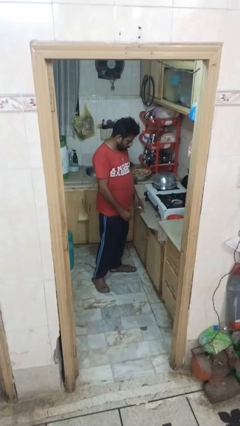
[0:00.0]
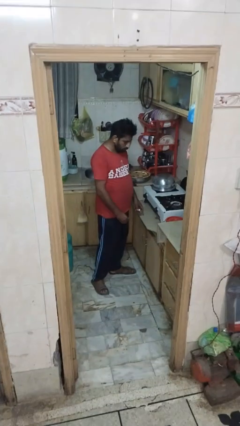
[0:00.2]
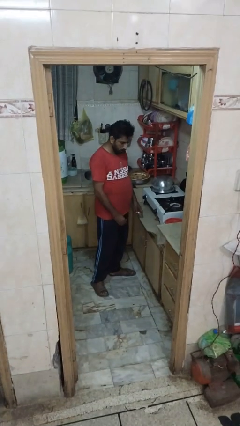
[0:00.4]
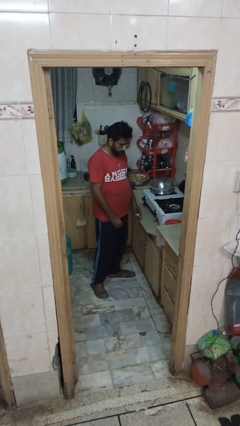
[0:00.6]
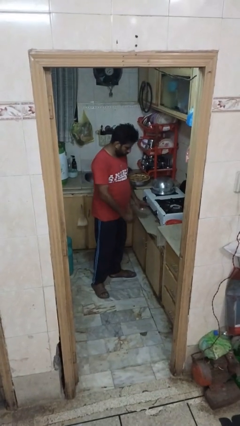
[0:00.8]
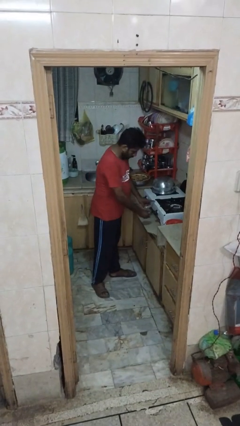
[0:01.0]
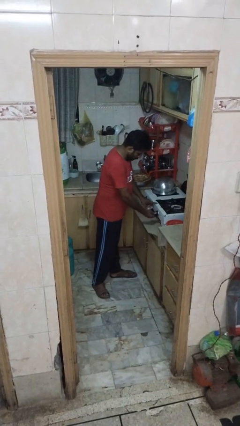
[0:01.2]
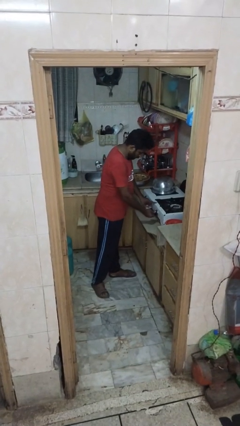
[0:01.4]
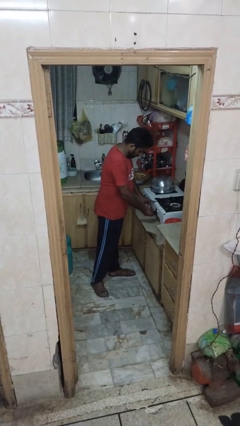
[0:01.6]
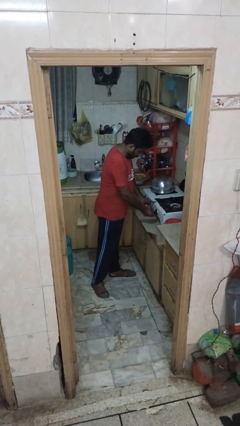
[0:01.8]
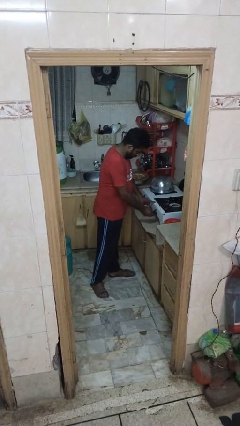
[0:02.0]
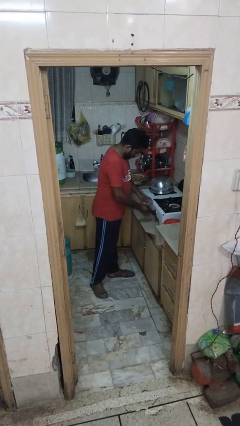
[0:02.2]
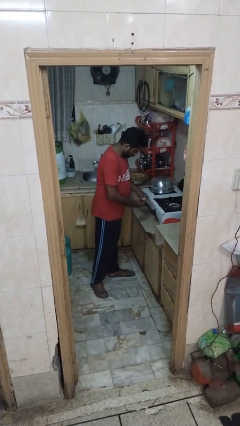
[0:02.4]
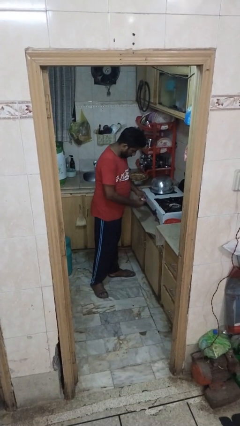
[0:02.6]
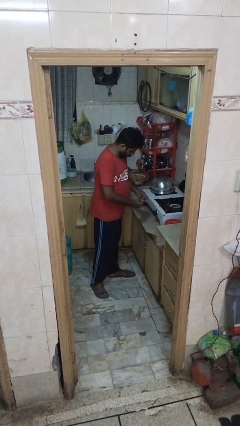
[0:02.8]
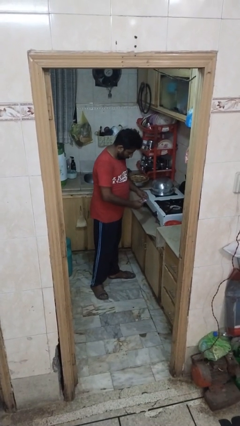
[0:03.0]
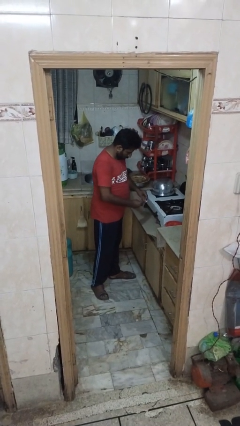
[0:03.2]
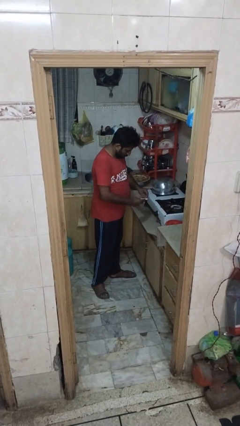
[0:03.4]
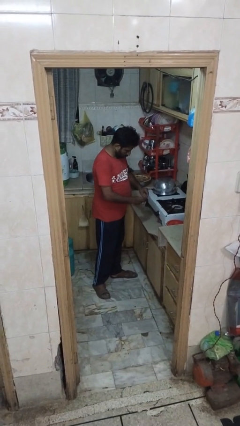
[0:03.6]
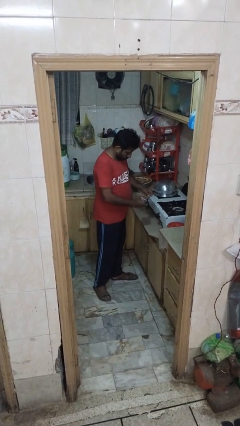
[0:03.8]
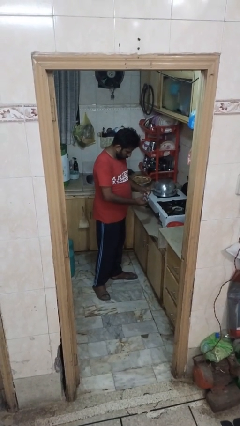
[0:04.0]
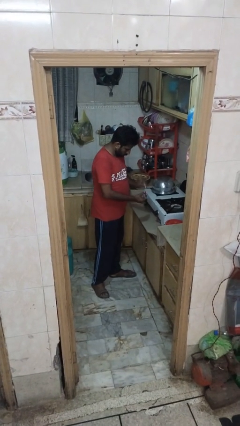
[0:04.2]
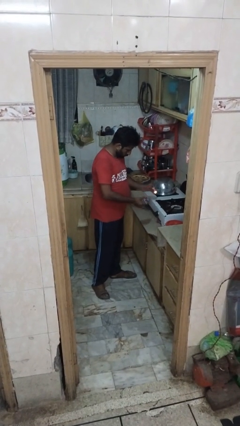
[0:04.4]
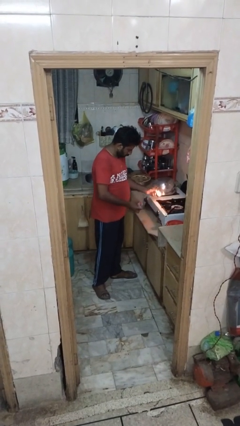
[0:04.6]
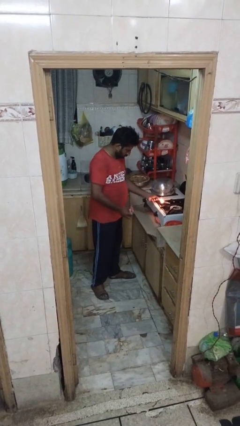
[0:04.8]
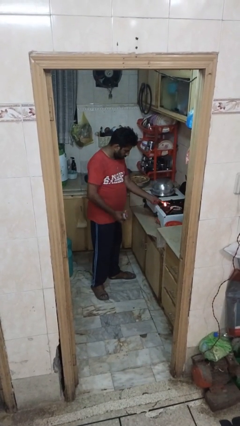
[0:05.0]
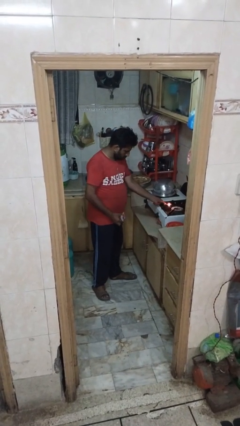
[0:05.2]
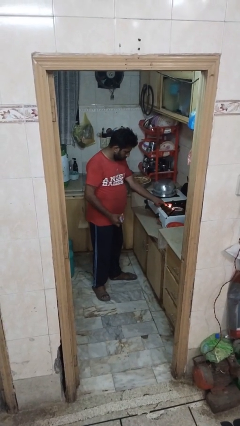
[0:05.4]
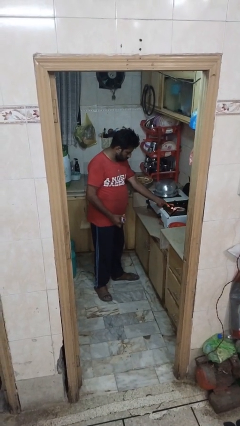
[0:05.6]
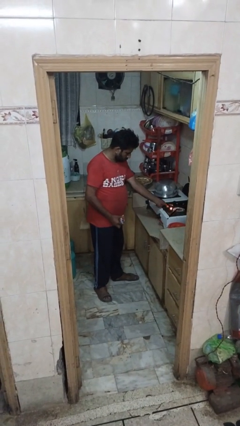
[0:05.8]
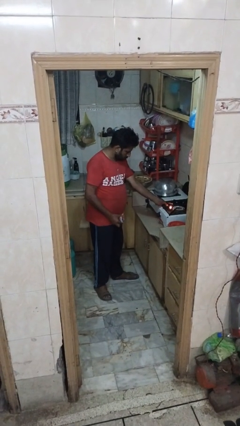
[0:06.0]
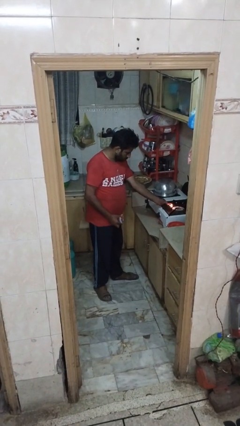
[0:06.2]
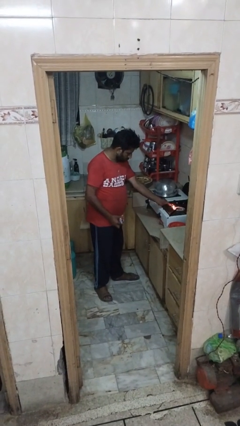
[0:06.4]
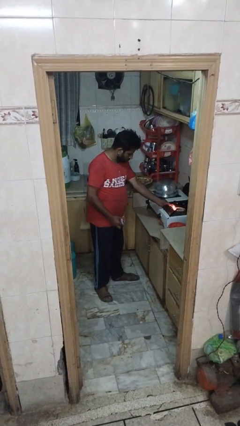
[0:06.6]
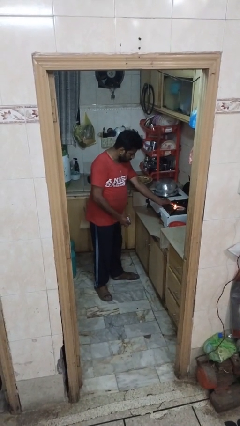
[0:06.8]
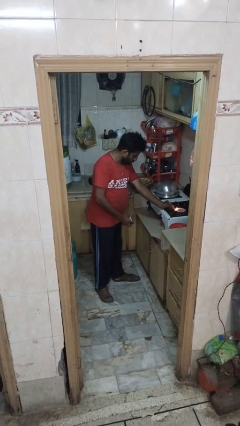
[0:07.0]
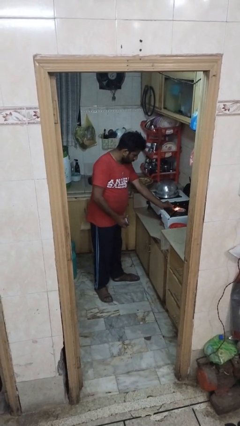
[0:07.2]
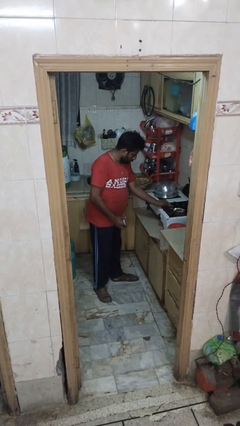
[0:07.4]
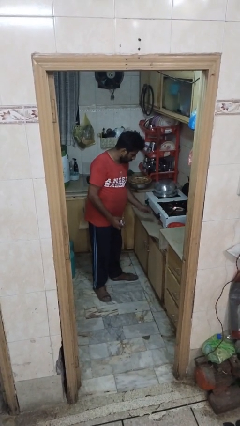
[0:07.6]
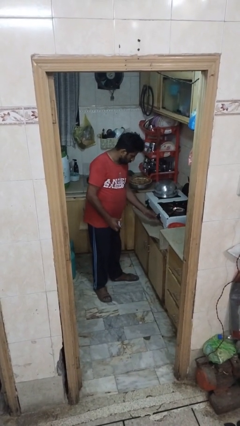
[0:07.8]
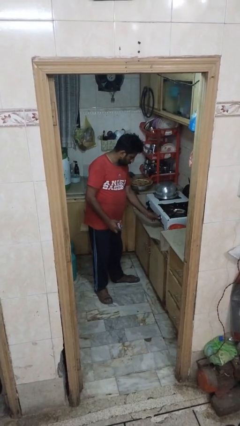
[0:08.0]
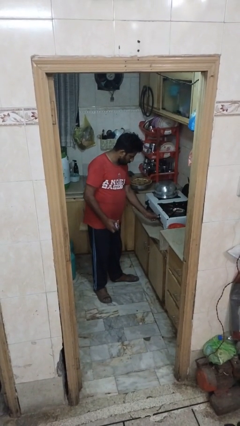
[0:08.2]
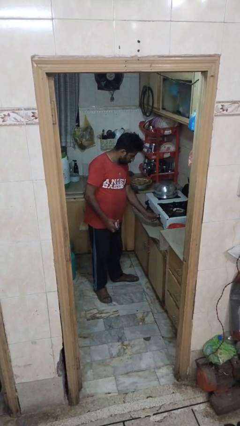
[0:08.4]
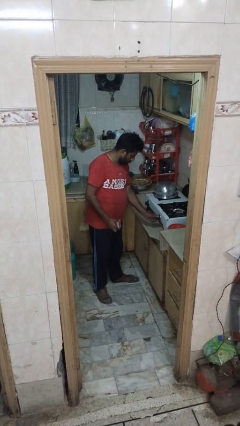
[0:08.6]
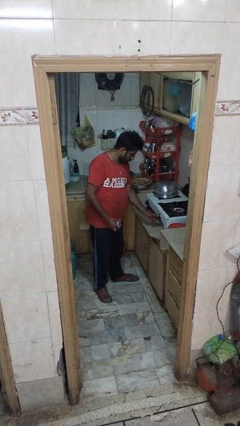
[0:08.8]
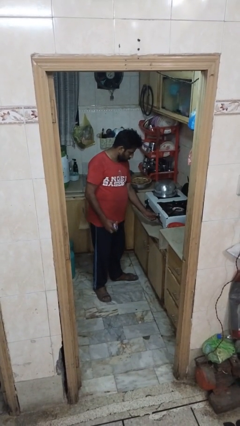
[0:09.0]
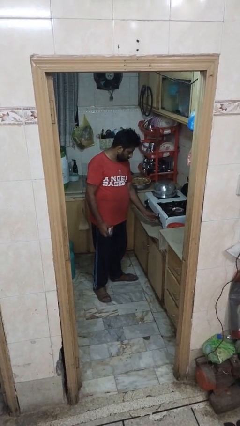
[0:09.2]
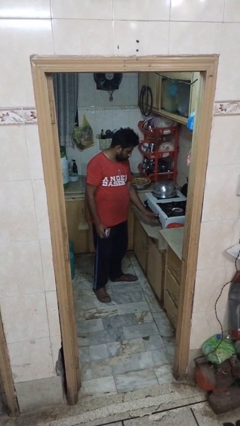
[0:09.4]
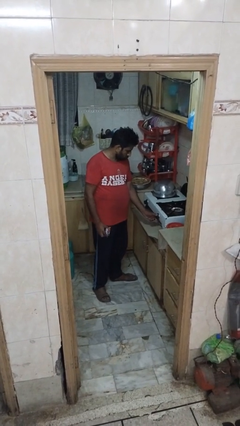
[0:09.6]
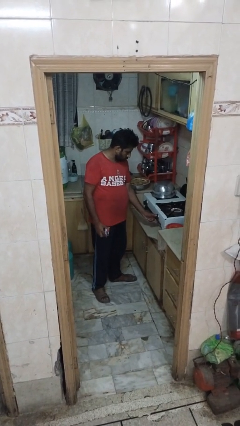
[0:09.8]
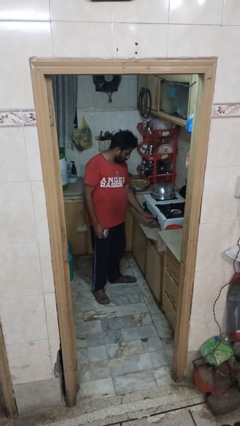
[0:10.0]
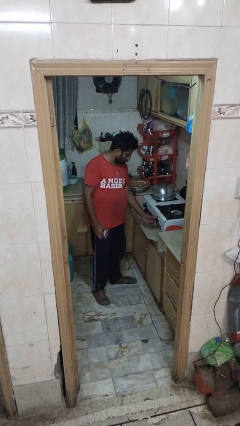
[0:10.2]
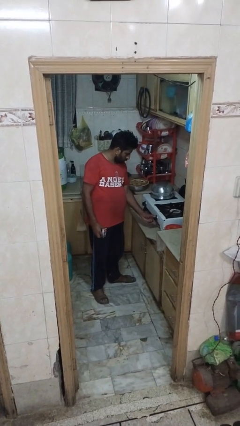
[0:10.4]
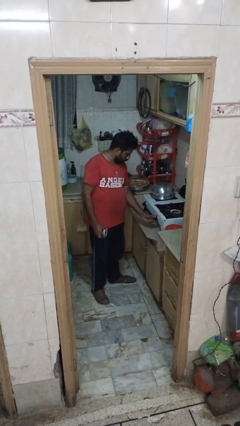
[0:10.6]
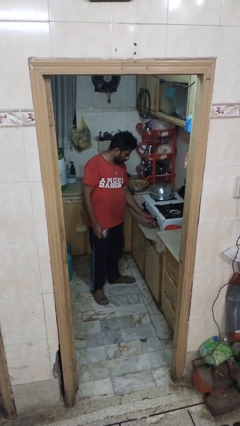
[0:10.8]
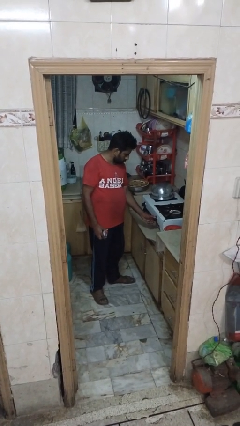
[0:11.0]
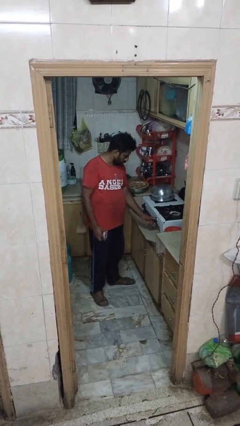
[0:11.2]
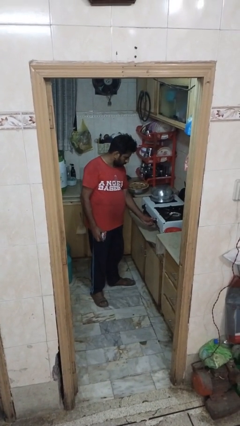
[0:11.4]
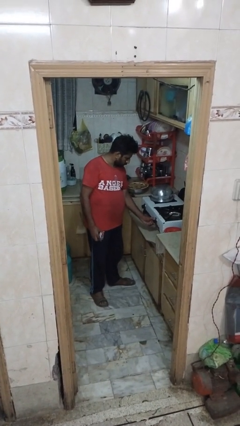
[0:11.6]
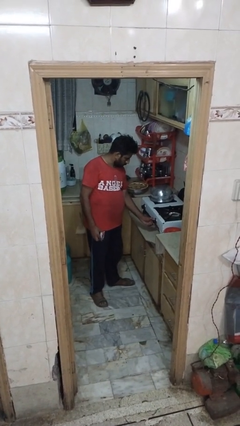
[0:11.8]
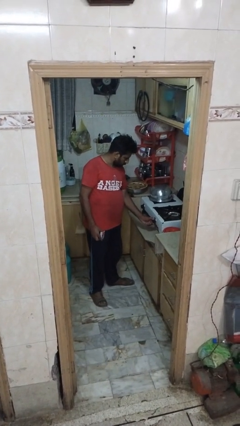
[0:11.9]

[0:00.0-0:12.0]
person turns on stovetop

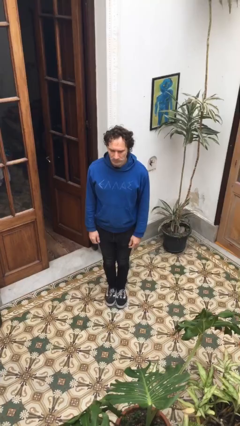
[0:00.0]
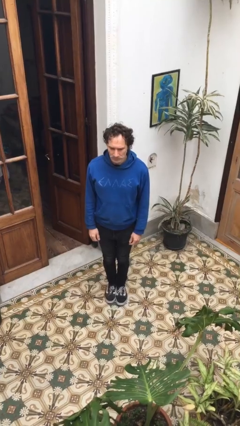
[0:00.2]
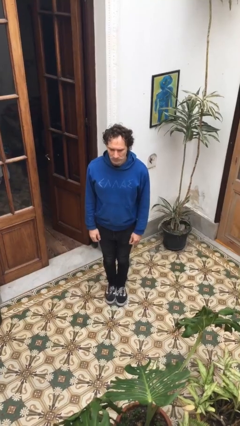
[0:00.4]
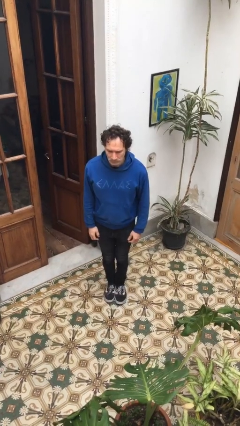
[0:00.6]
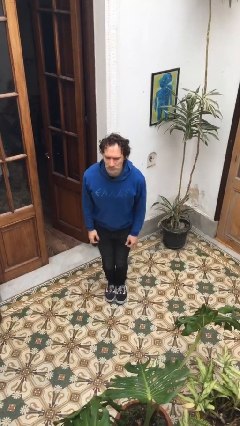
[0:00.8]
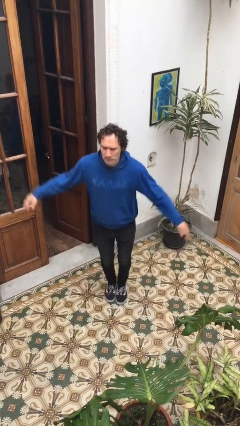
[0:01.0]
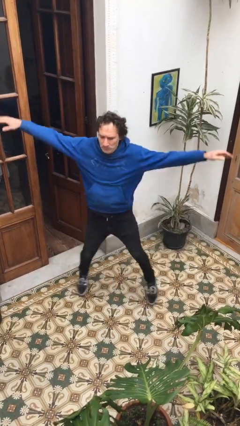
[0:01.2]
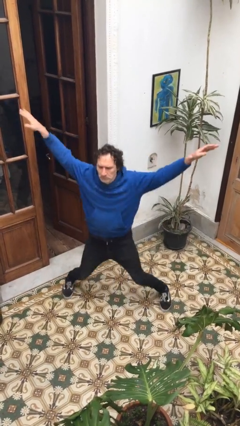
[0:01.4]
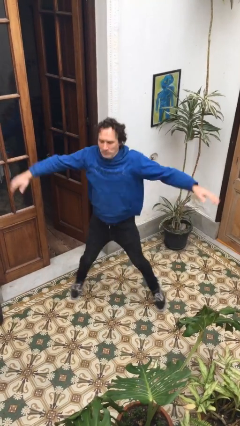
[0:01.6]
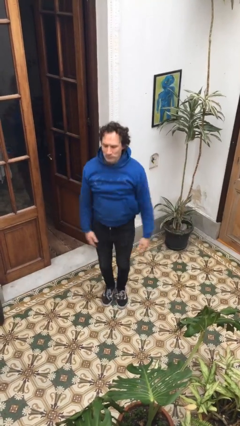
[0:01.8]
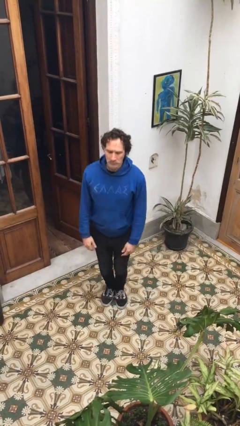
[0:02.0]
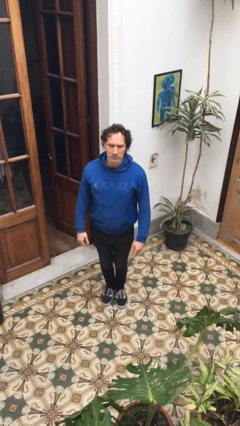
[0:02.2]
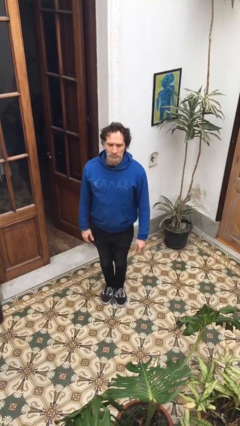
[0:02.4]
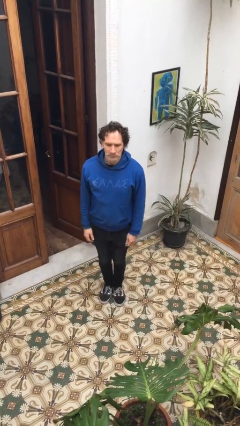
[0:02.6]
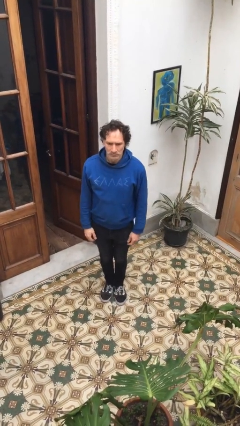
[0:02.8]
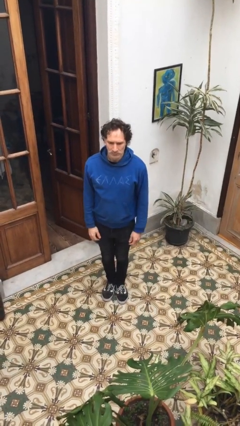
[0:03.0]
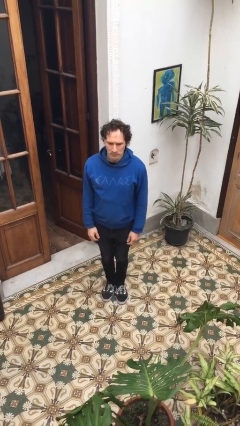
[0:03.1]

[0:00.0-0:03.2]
person exercises with jumping jacks

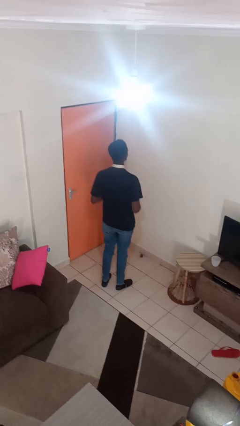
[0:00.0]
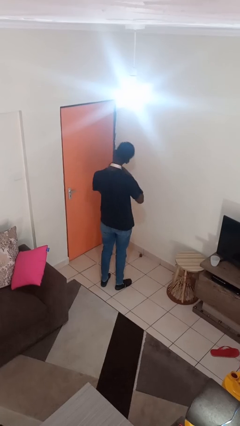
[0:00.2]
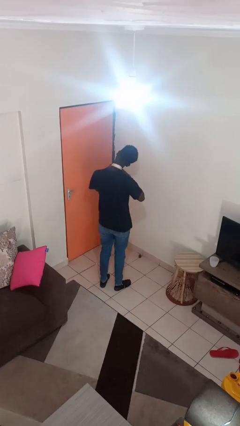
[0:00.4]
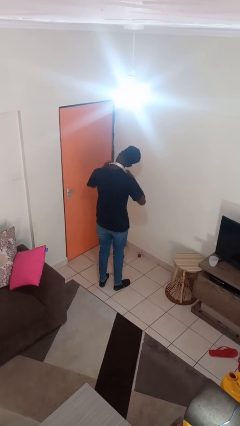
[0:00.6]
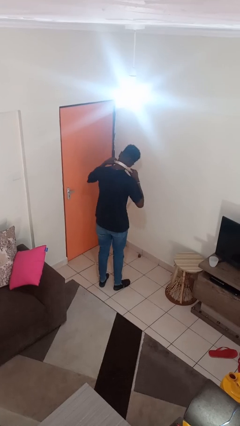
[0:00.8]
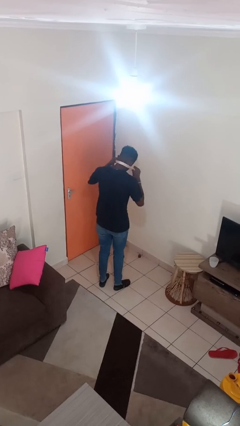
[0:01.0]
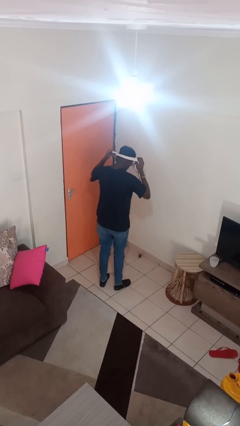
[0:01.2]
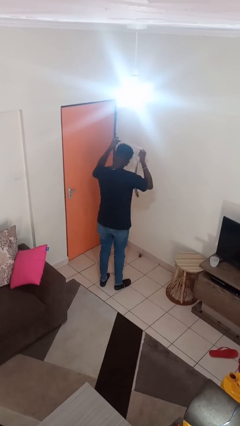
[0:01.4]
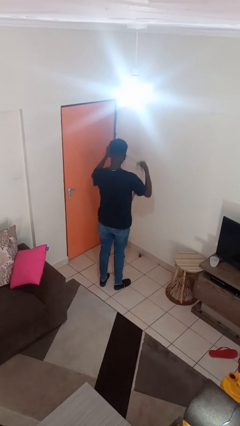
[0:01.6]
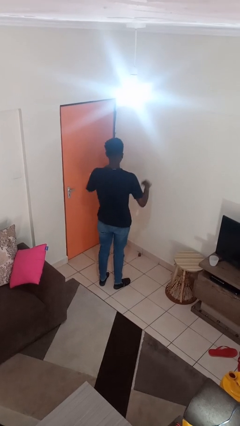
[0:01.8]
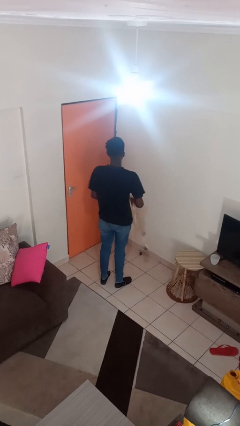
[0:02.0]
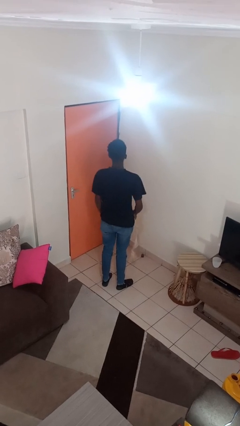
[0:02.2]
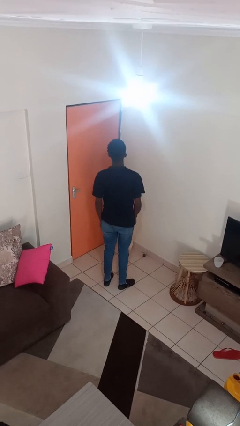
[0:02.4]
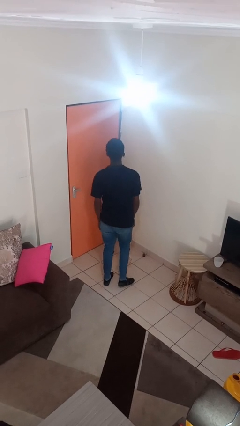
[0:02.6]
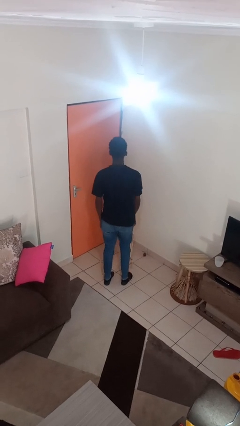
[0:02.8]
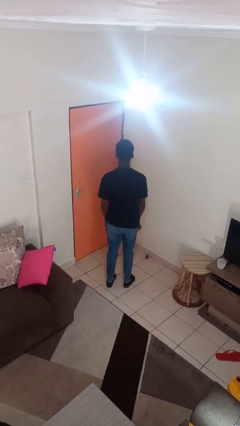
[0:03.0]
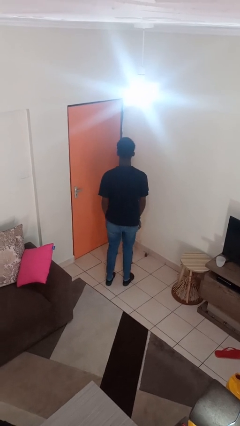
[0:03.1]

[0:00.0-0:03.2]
person takes off necktie
